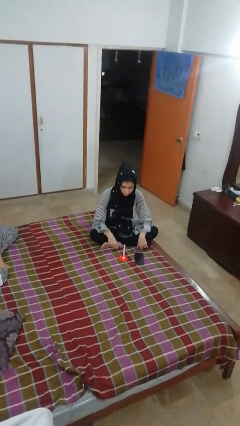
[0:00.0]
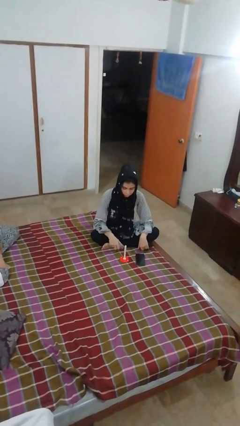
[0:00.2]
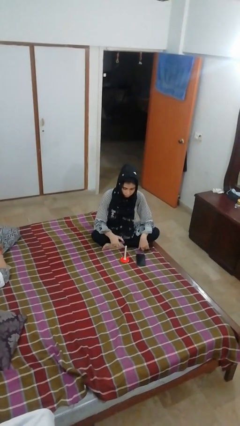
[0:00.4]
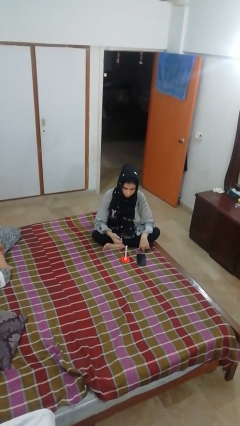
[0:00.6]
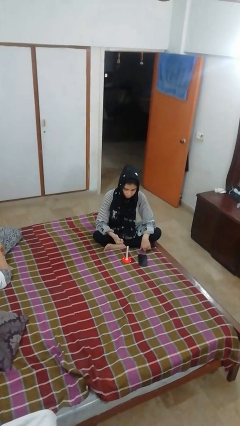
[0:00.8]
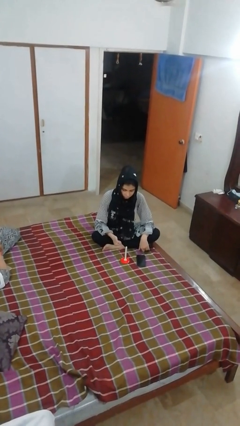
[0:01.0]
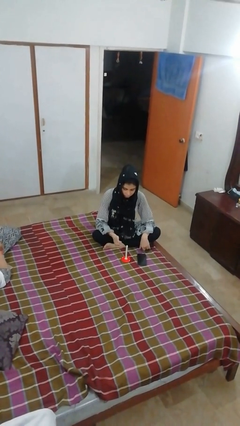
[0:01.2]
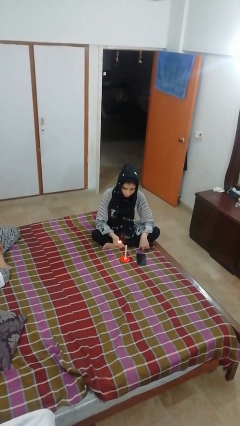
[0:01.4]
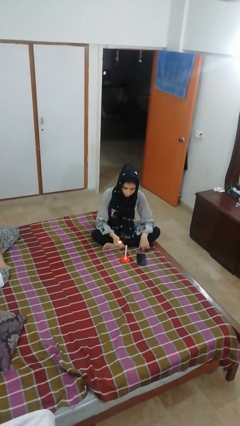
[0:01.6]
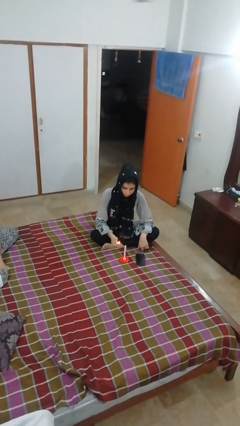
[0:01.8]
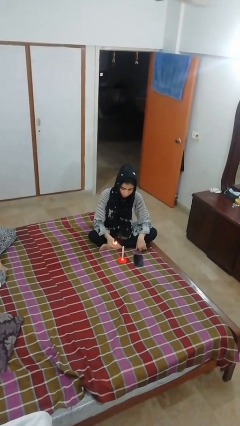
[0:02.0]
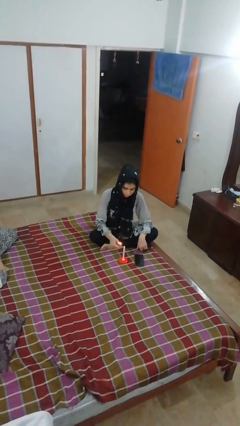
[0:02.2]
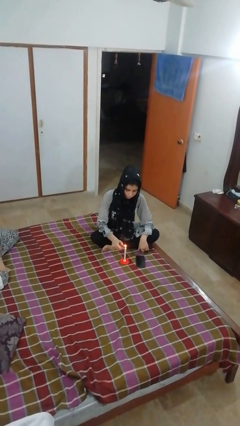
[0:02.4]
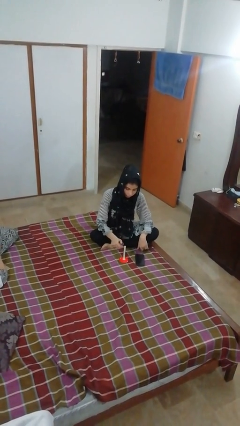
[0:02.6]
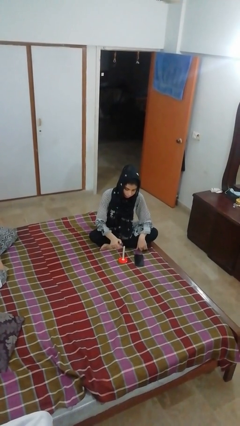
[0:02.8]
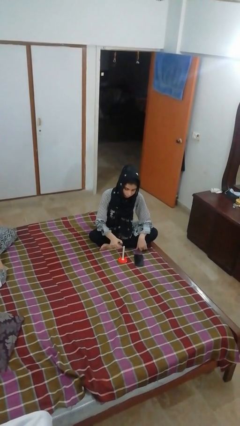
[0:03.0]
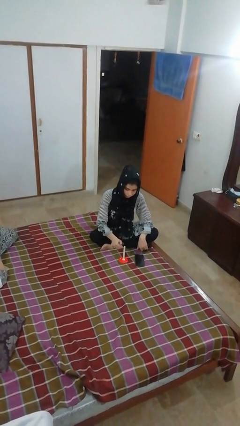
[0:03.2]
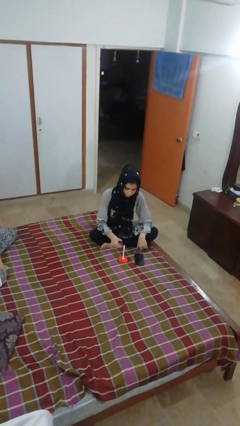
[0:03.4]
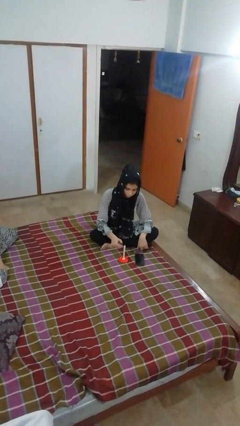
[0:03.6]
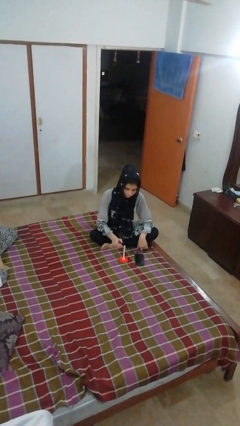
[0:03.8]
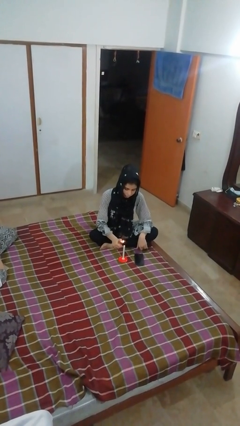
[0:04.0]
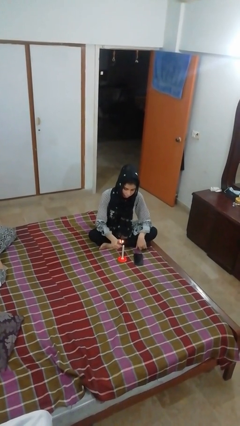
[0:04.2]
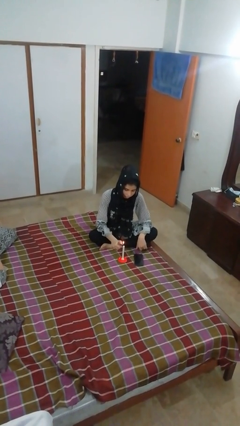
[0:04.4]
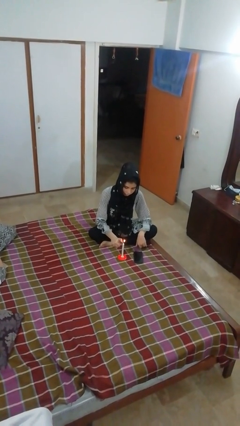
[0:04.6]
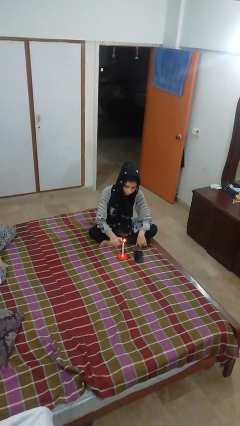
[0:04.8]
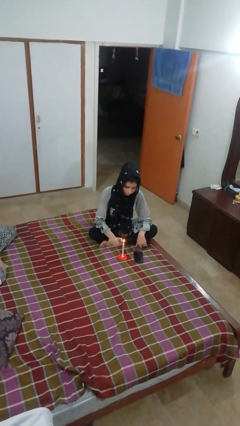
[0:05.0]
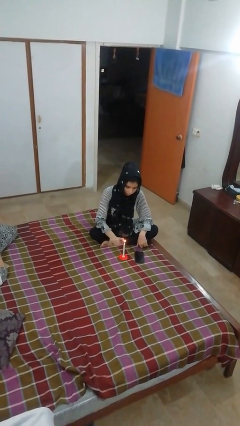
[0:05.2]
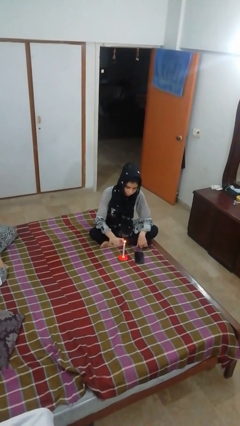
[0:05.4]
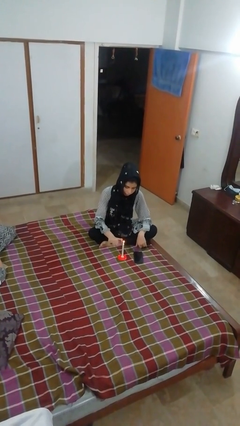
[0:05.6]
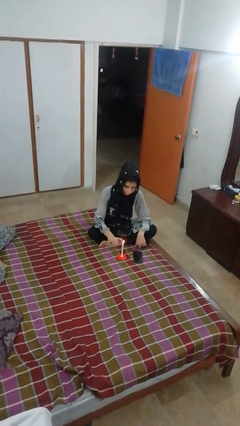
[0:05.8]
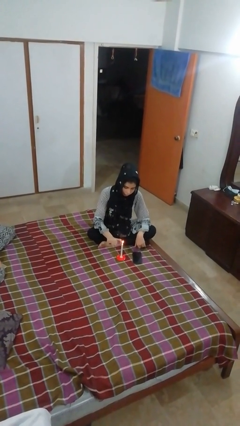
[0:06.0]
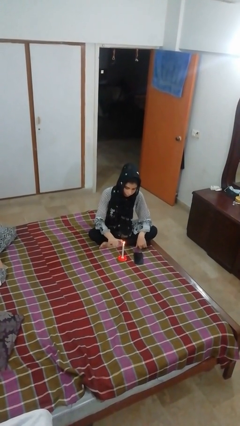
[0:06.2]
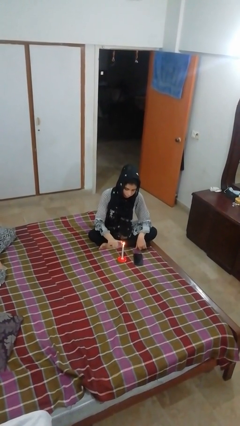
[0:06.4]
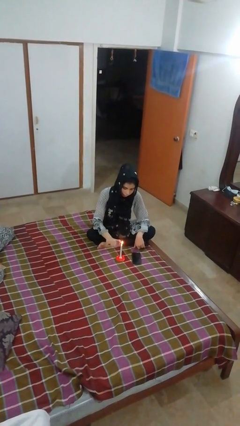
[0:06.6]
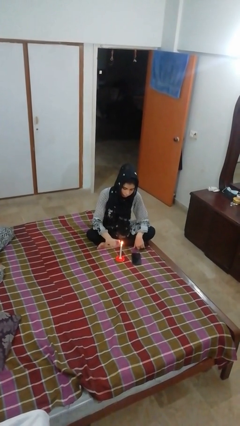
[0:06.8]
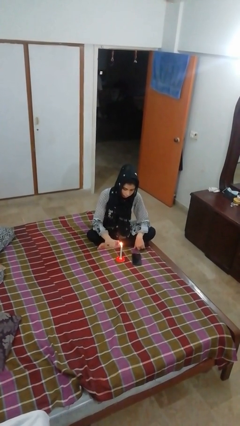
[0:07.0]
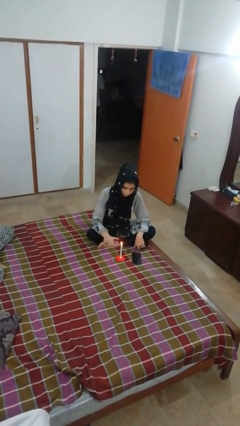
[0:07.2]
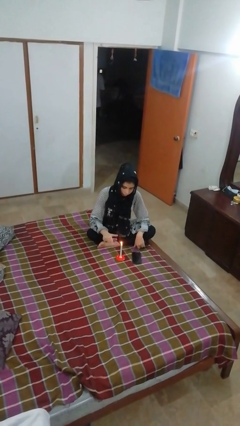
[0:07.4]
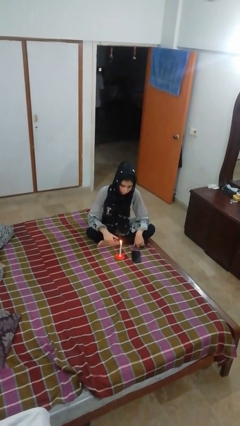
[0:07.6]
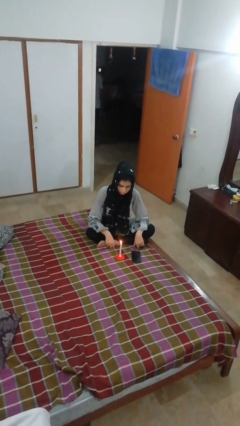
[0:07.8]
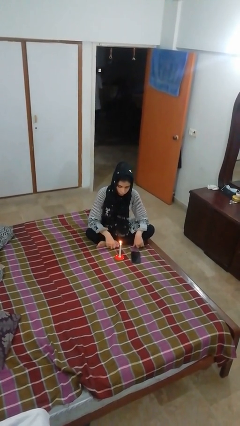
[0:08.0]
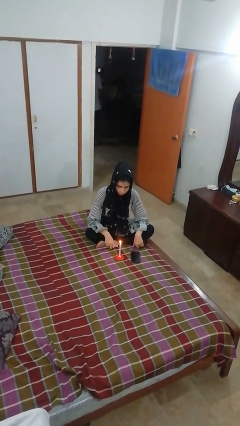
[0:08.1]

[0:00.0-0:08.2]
person lights candle

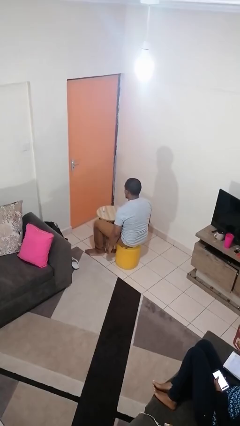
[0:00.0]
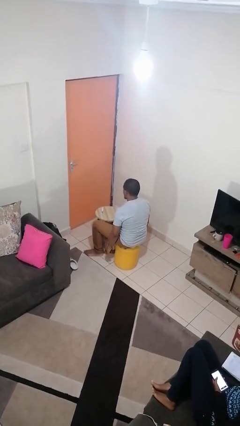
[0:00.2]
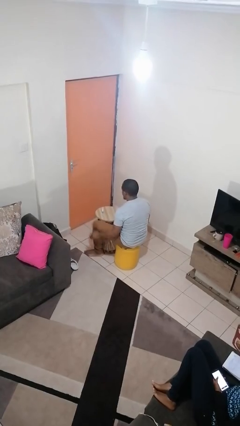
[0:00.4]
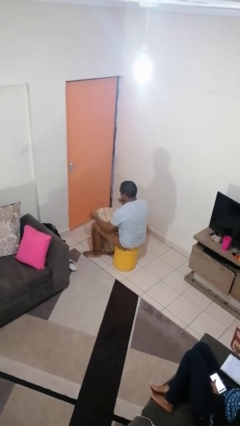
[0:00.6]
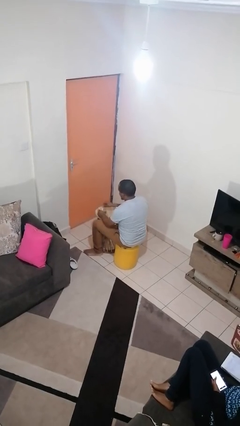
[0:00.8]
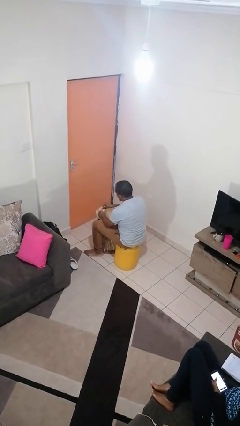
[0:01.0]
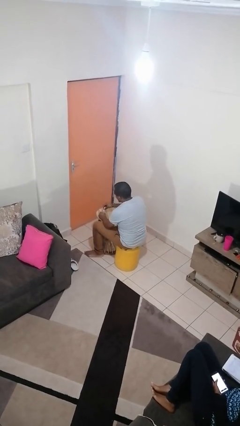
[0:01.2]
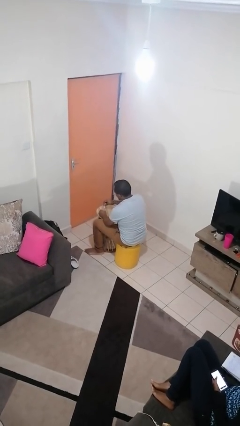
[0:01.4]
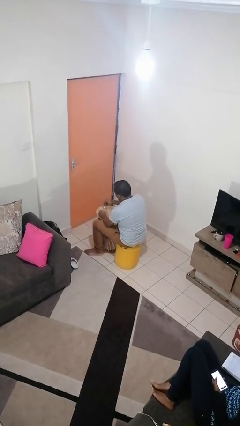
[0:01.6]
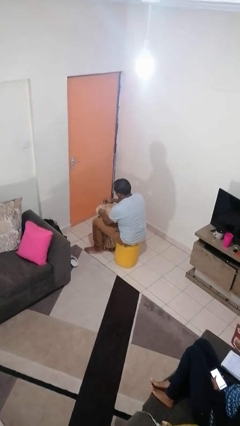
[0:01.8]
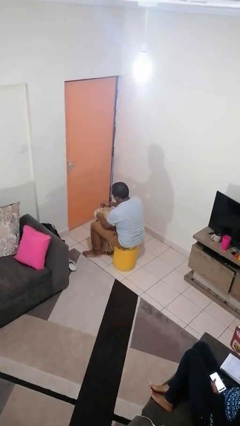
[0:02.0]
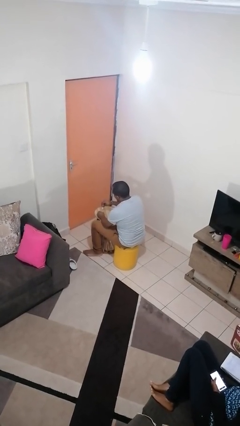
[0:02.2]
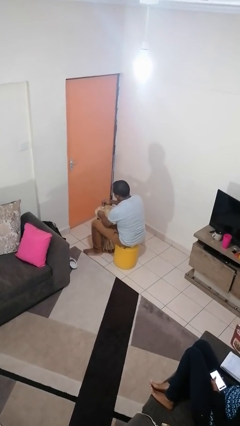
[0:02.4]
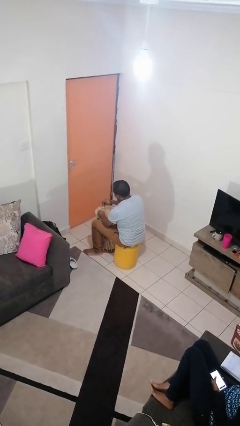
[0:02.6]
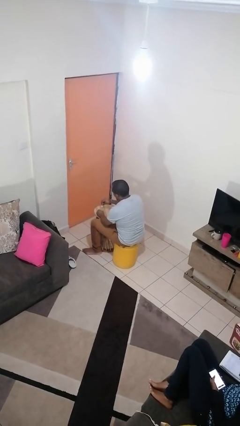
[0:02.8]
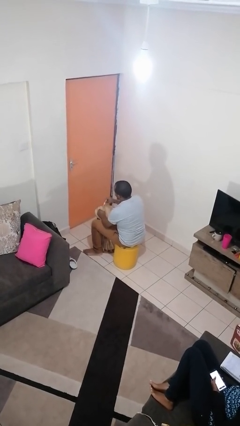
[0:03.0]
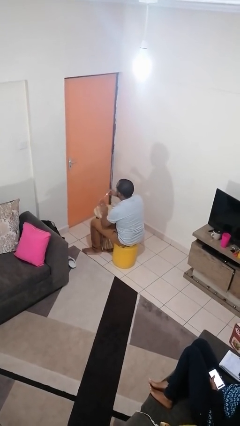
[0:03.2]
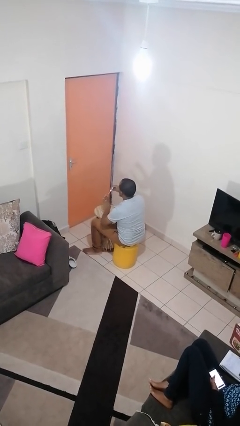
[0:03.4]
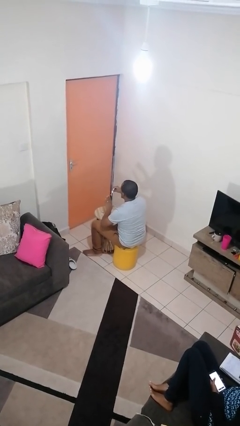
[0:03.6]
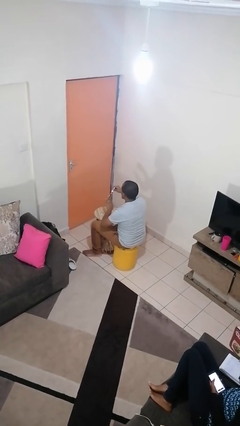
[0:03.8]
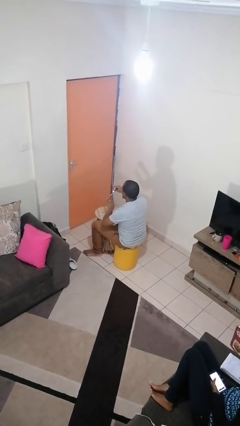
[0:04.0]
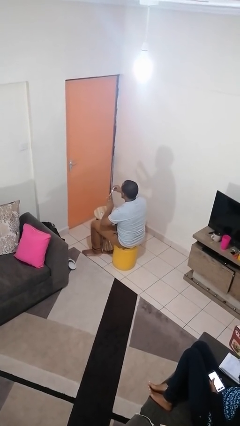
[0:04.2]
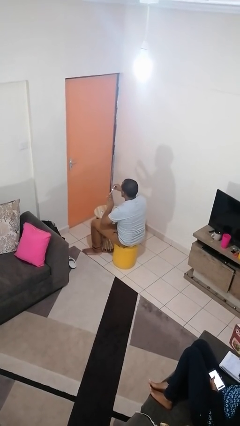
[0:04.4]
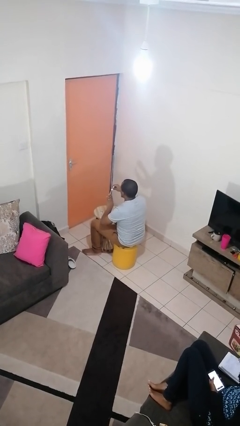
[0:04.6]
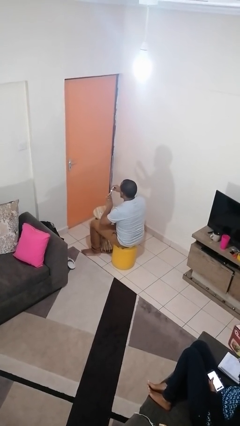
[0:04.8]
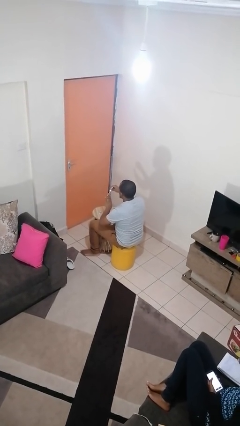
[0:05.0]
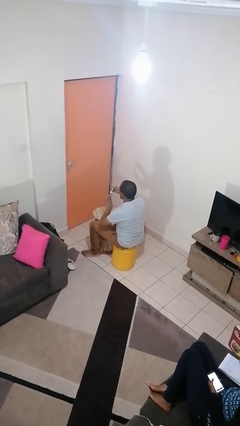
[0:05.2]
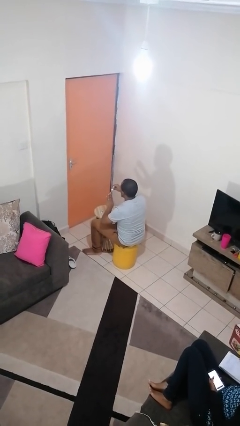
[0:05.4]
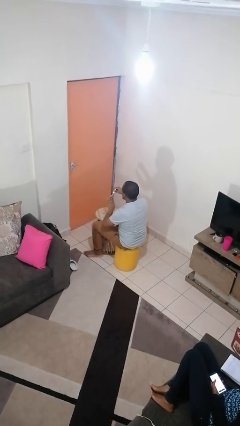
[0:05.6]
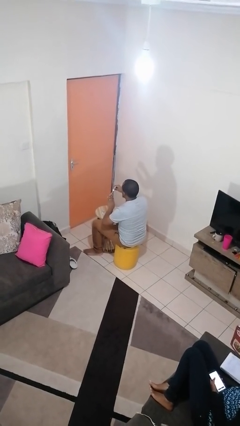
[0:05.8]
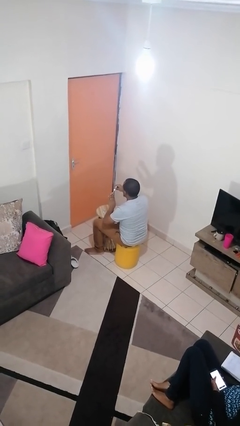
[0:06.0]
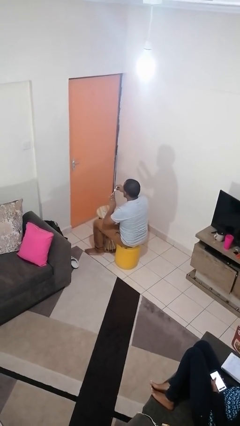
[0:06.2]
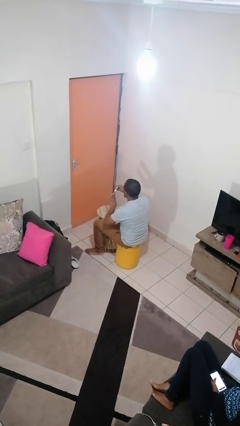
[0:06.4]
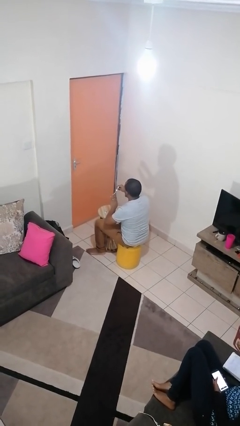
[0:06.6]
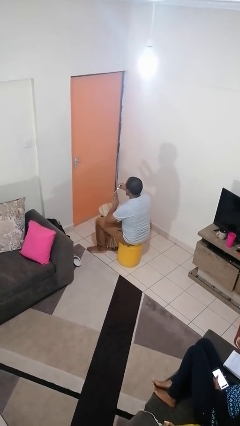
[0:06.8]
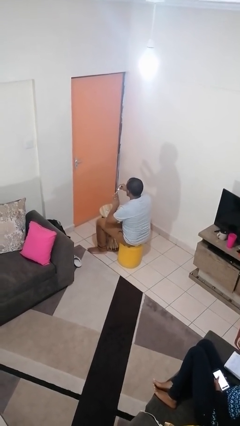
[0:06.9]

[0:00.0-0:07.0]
person paints fingernails

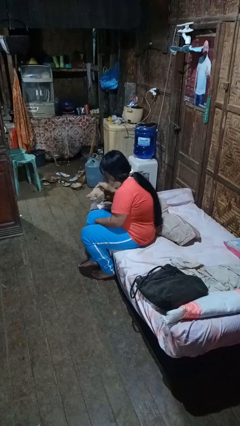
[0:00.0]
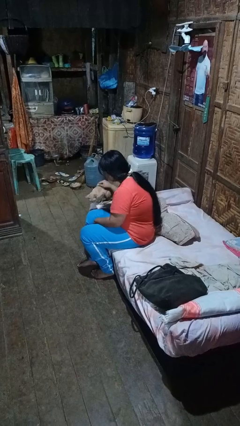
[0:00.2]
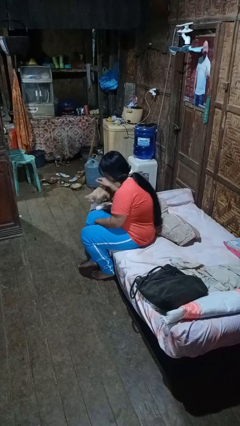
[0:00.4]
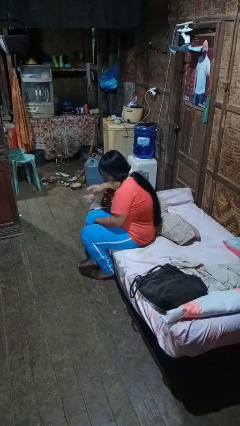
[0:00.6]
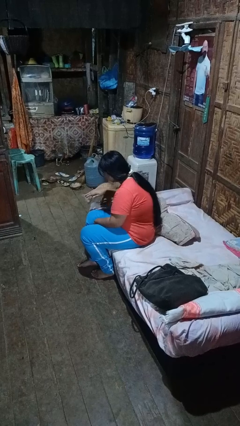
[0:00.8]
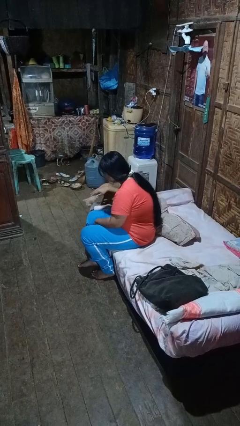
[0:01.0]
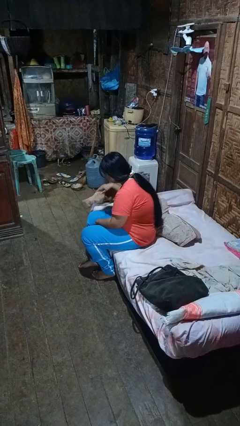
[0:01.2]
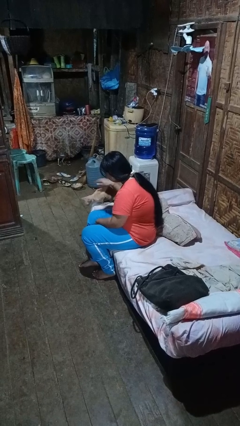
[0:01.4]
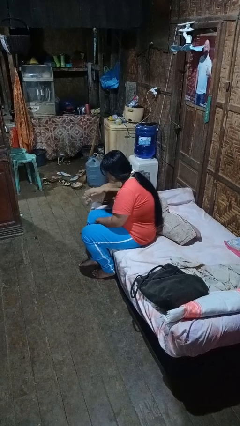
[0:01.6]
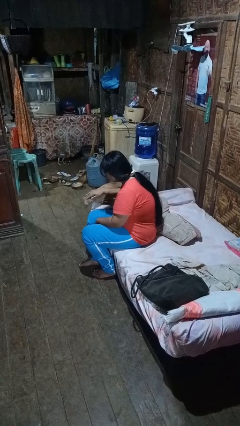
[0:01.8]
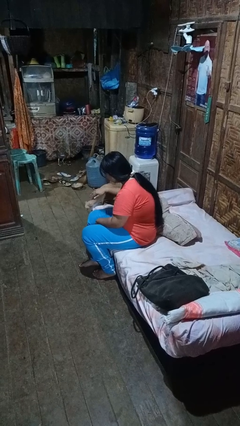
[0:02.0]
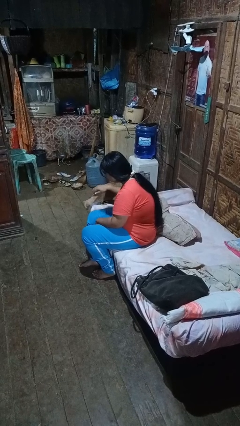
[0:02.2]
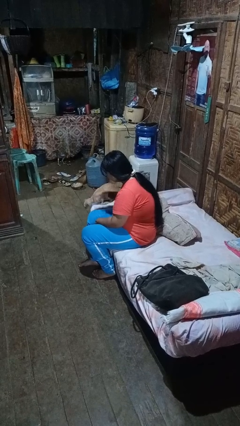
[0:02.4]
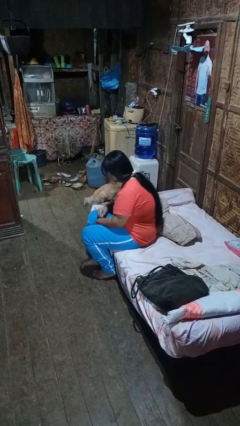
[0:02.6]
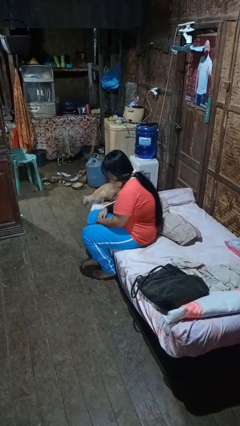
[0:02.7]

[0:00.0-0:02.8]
person pets cat

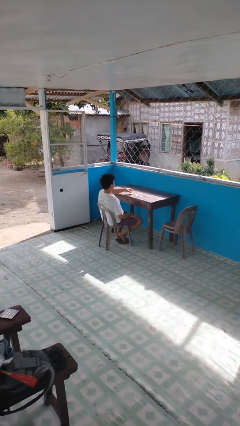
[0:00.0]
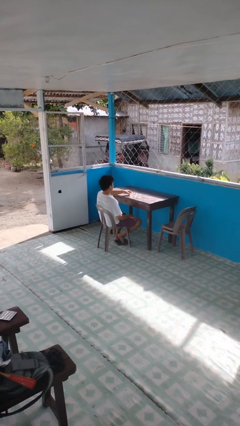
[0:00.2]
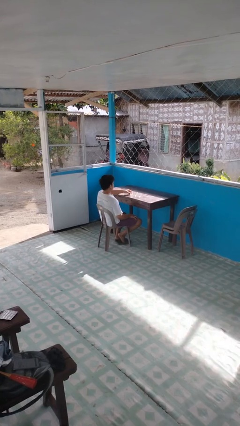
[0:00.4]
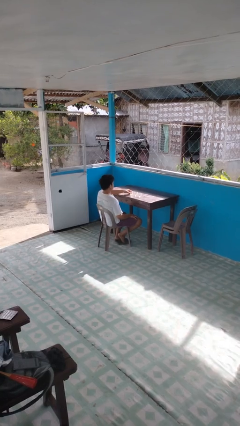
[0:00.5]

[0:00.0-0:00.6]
person puts down object on table
